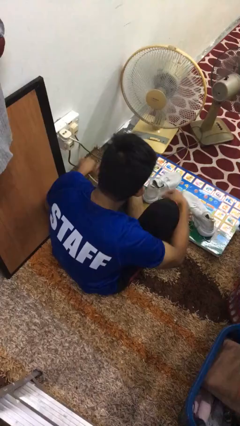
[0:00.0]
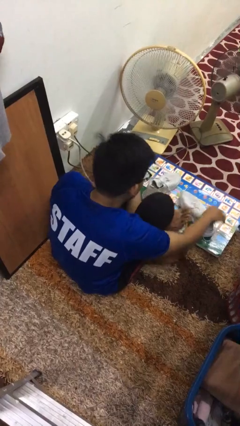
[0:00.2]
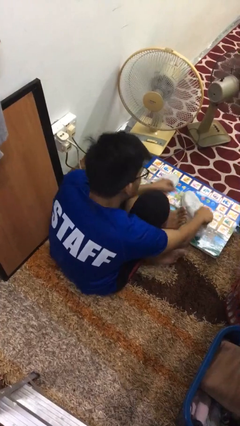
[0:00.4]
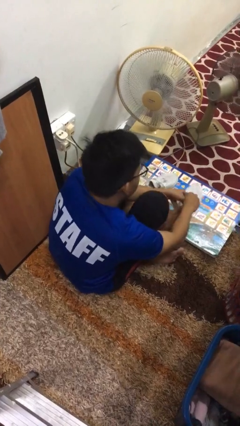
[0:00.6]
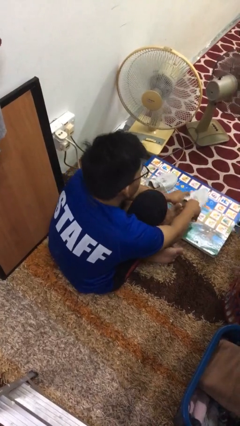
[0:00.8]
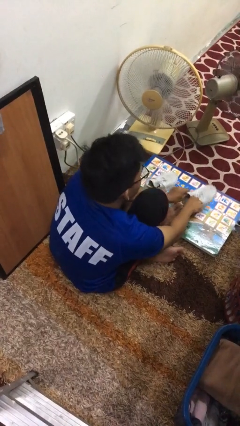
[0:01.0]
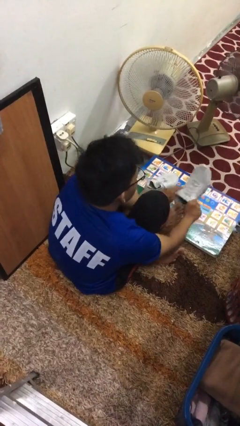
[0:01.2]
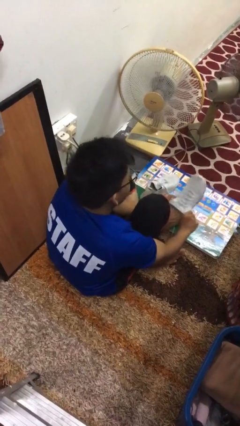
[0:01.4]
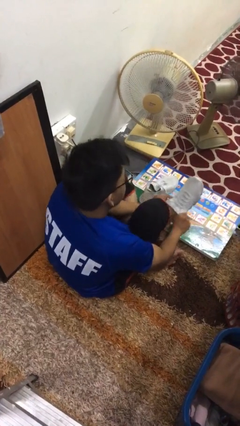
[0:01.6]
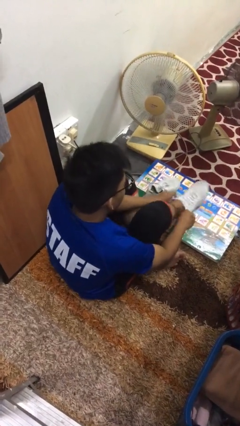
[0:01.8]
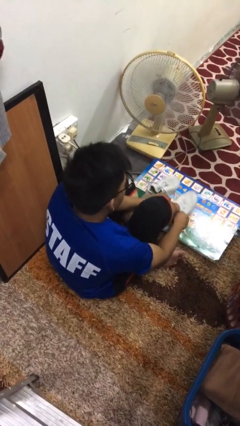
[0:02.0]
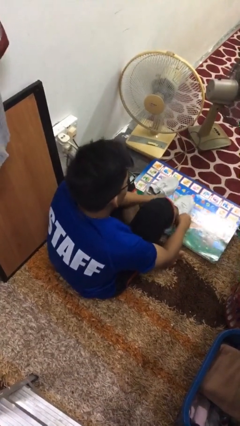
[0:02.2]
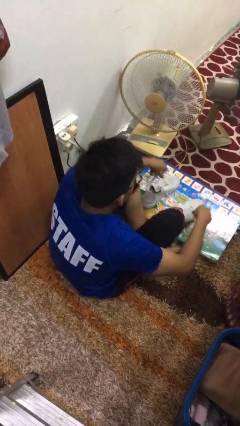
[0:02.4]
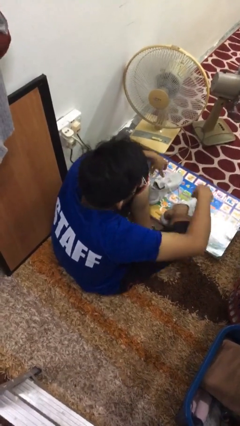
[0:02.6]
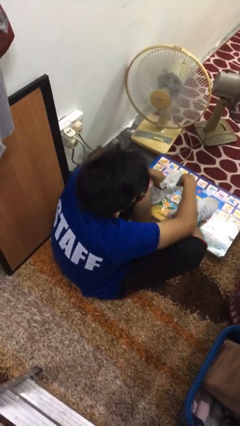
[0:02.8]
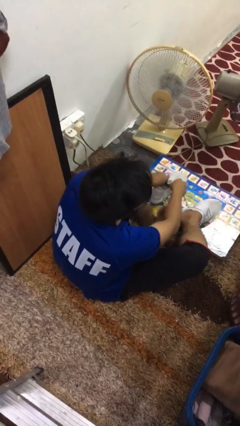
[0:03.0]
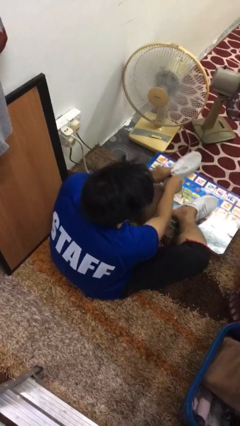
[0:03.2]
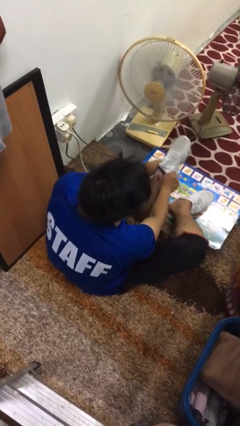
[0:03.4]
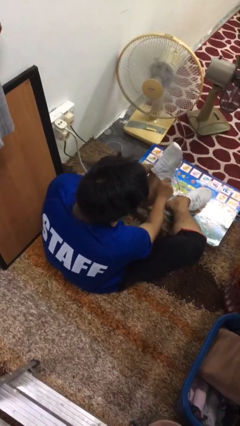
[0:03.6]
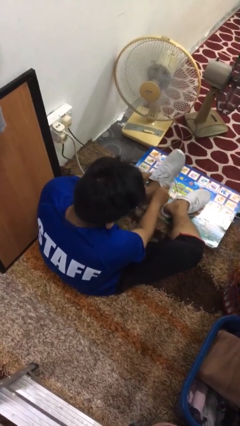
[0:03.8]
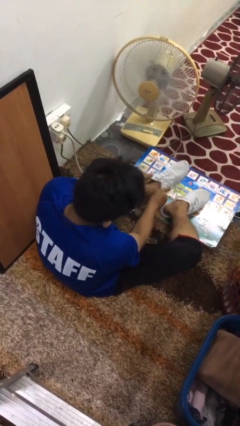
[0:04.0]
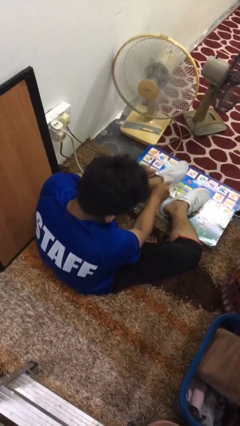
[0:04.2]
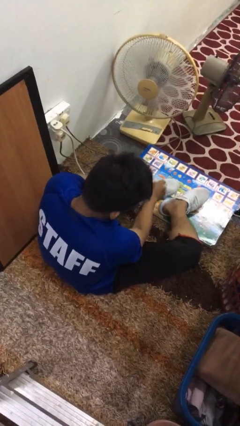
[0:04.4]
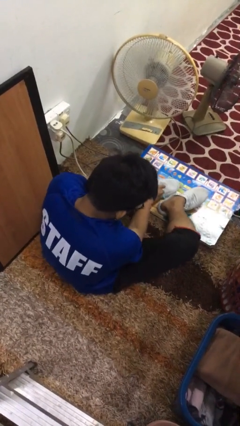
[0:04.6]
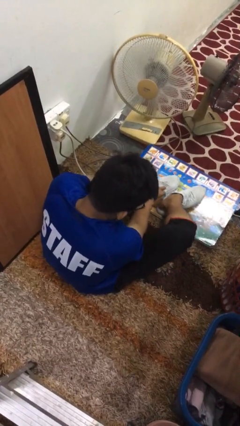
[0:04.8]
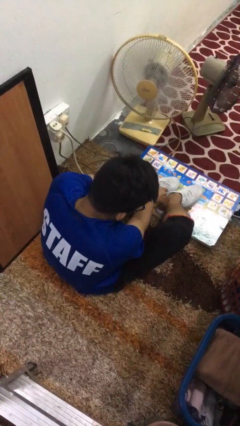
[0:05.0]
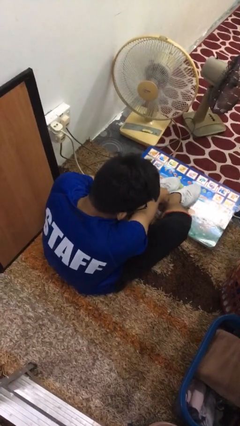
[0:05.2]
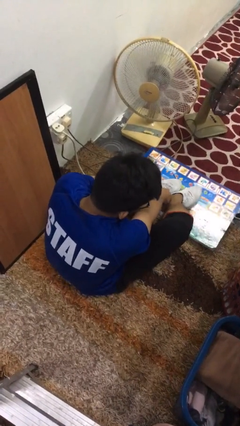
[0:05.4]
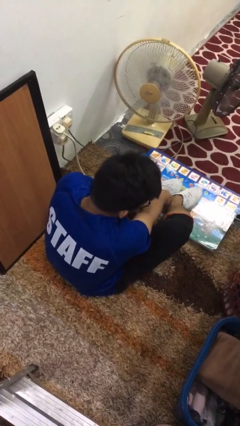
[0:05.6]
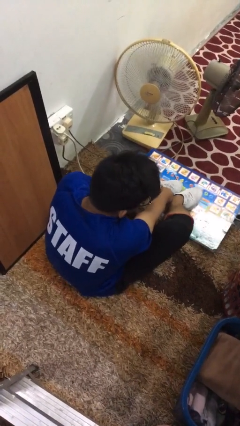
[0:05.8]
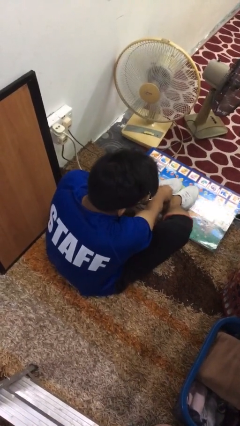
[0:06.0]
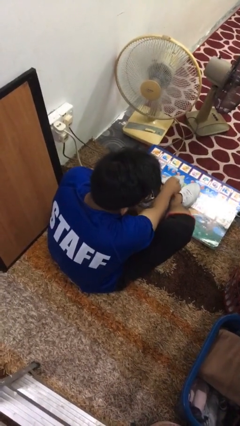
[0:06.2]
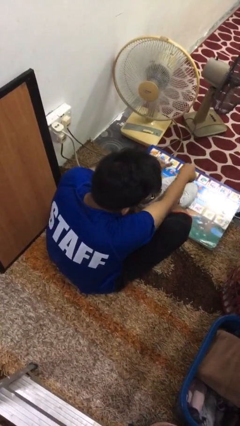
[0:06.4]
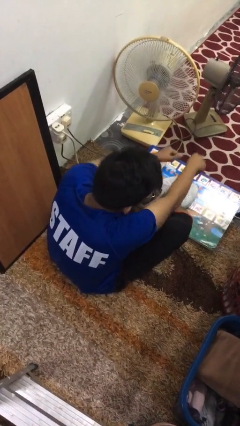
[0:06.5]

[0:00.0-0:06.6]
person puts on shoes

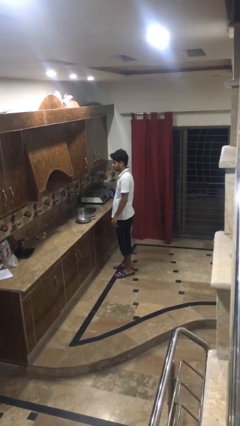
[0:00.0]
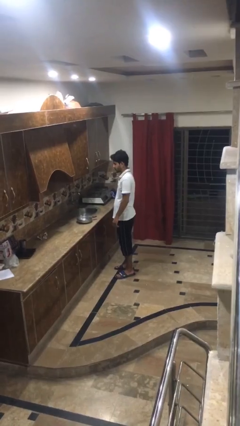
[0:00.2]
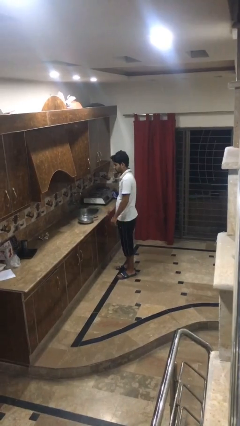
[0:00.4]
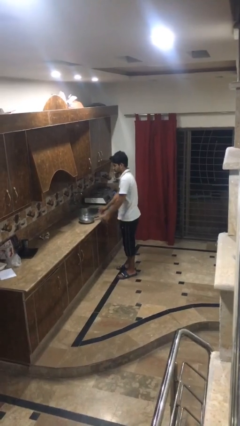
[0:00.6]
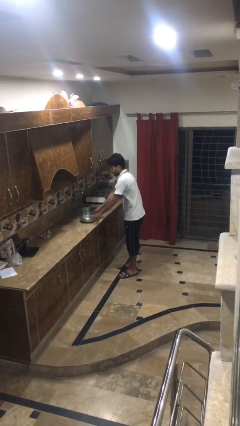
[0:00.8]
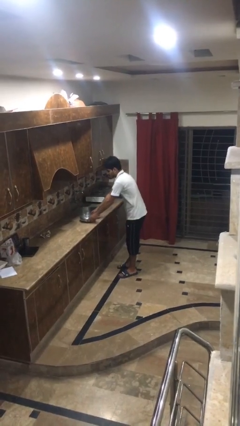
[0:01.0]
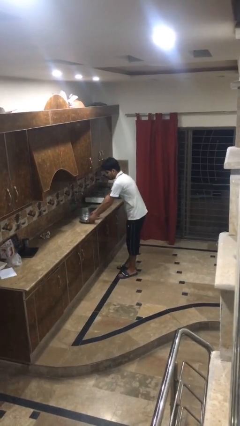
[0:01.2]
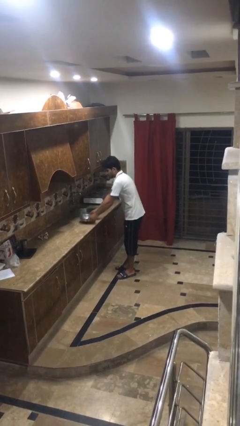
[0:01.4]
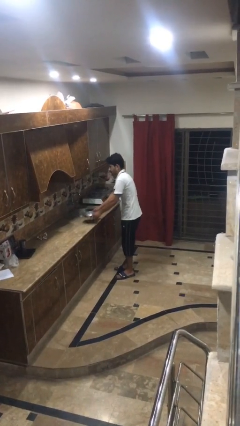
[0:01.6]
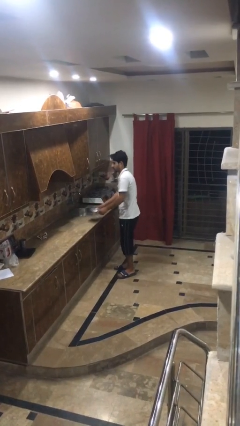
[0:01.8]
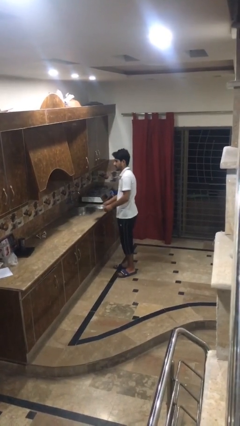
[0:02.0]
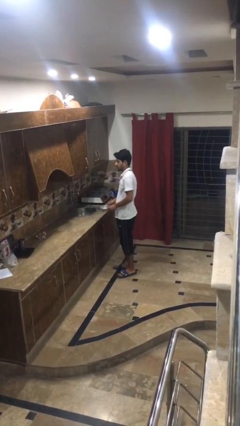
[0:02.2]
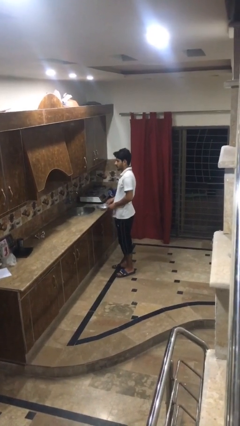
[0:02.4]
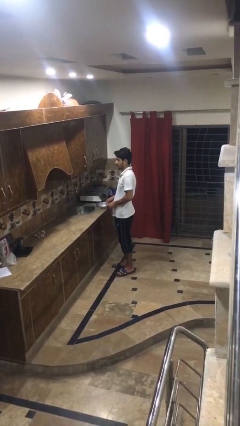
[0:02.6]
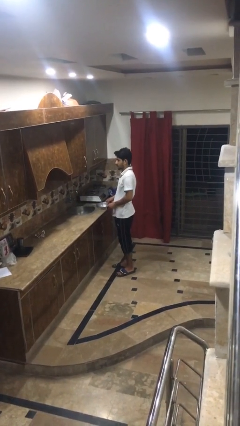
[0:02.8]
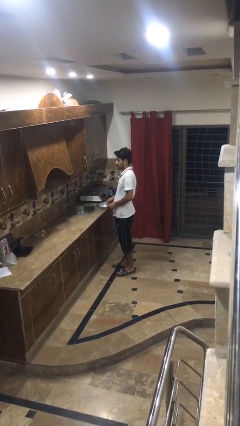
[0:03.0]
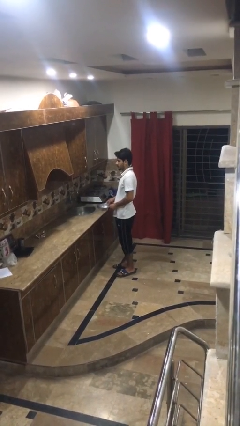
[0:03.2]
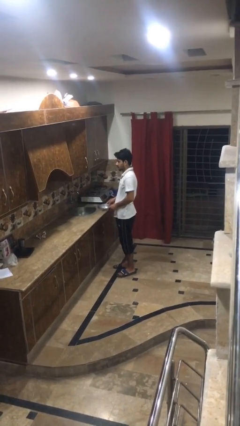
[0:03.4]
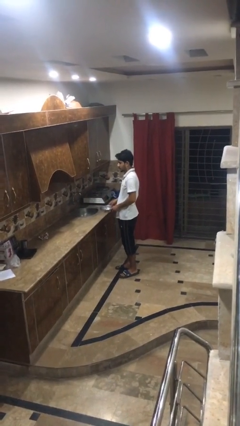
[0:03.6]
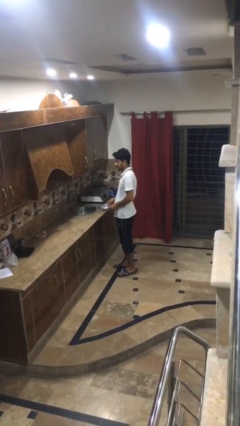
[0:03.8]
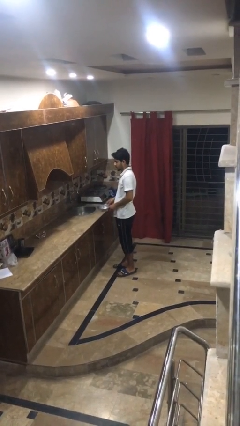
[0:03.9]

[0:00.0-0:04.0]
person picks up object from countertop

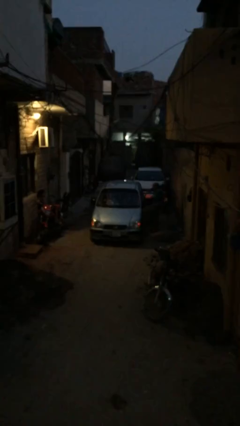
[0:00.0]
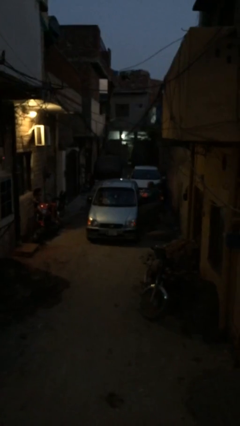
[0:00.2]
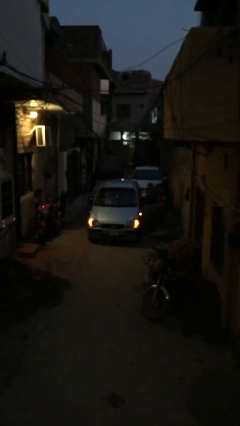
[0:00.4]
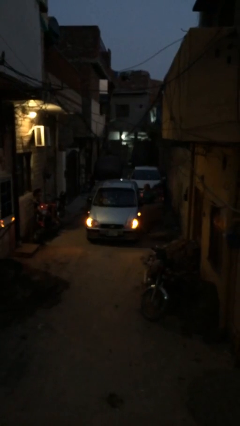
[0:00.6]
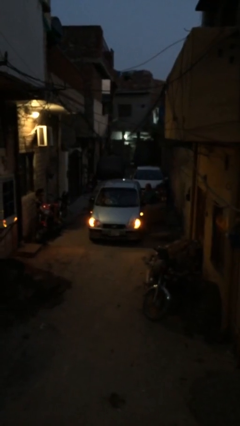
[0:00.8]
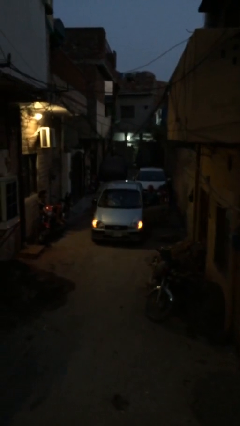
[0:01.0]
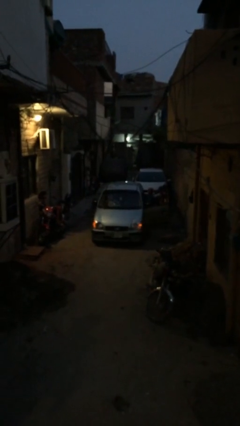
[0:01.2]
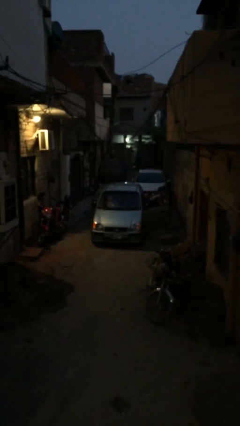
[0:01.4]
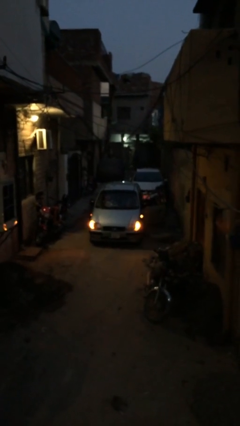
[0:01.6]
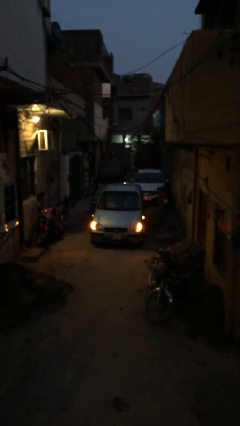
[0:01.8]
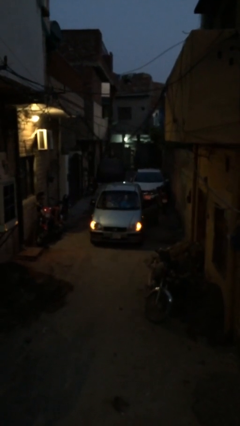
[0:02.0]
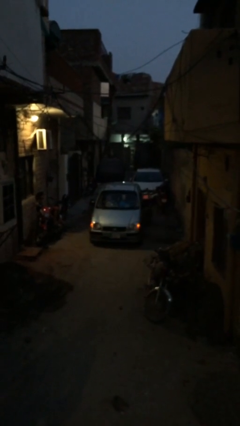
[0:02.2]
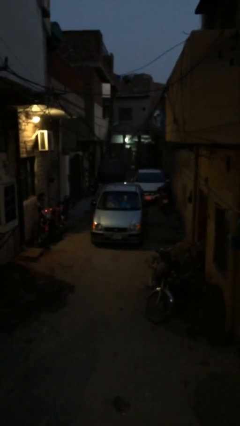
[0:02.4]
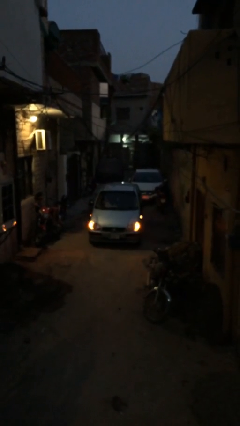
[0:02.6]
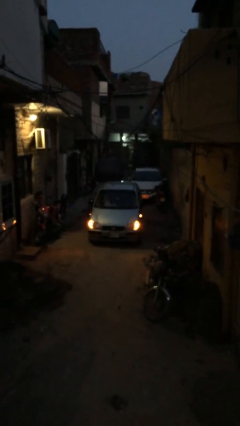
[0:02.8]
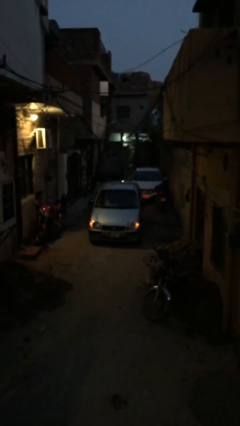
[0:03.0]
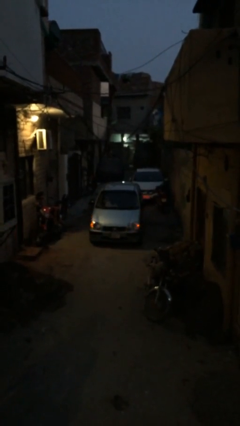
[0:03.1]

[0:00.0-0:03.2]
car picks up person

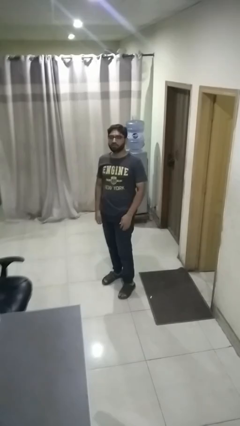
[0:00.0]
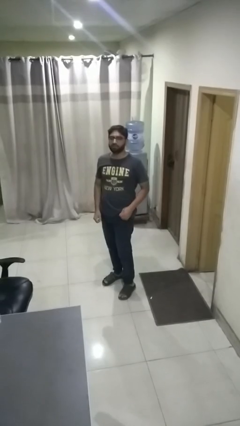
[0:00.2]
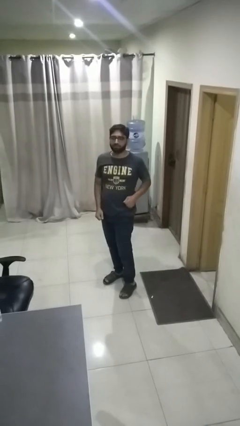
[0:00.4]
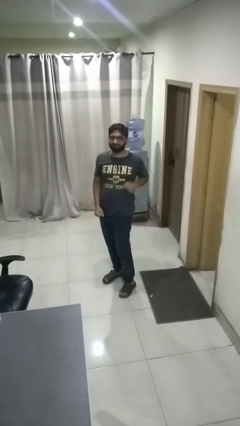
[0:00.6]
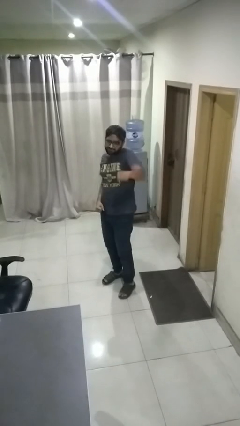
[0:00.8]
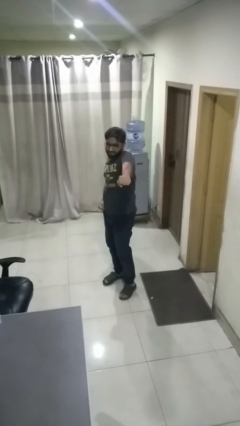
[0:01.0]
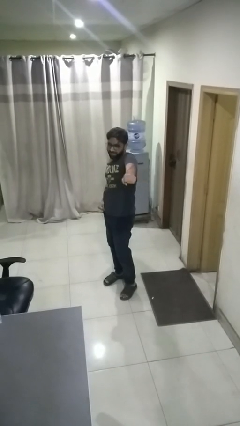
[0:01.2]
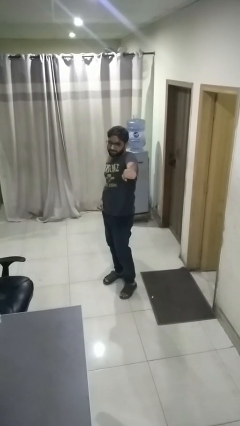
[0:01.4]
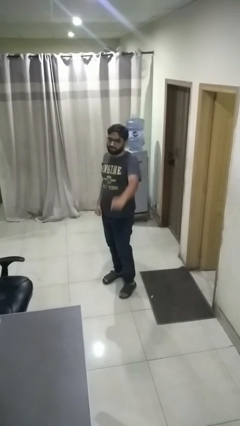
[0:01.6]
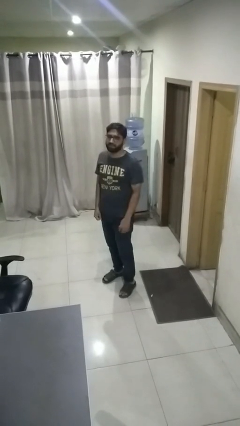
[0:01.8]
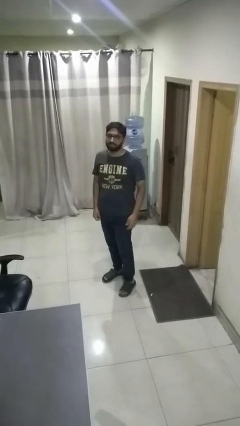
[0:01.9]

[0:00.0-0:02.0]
person punches

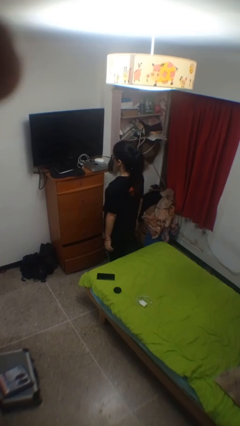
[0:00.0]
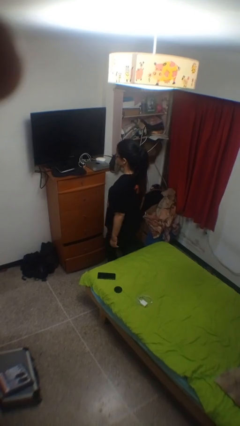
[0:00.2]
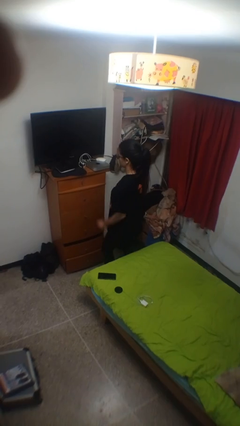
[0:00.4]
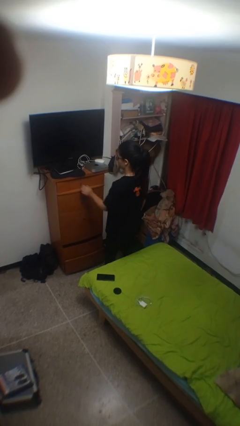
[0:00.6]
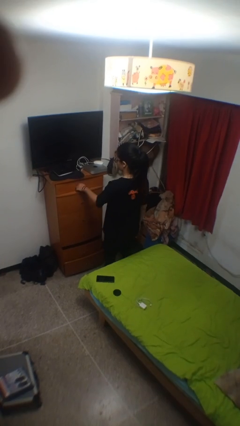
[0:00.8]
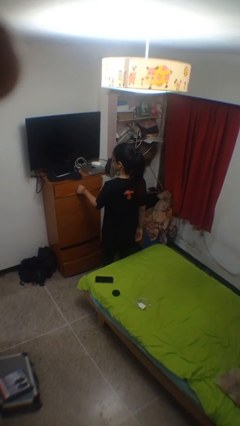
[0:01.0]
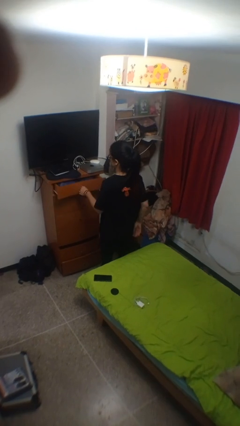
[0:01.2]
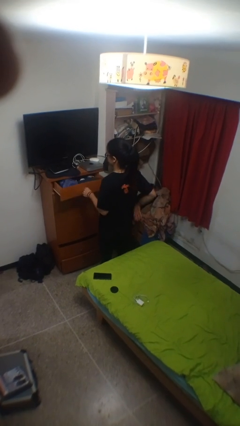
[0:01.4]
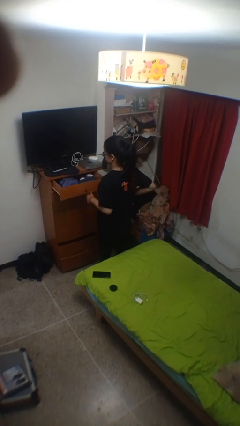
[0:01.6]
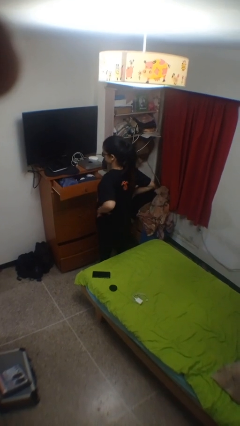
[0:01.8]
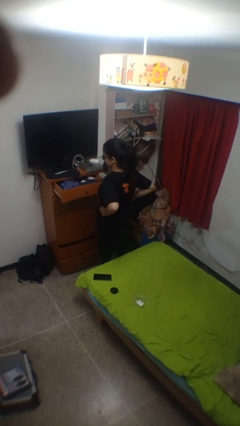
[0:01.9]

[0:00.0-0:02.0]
person opens dresser drawer
